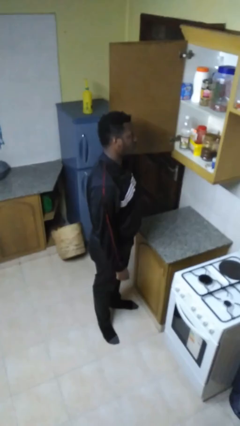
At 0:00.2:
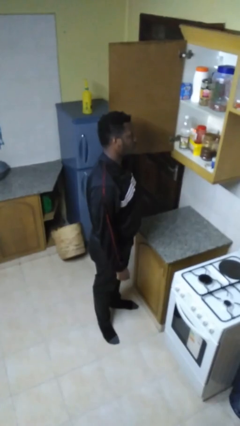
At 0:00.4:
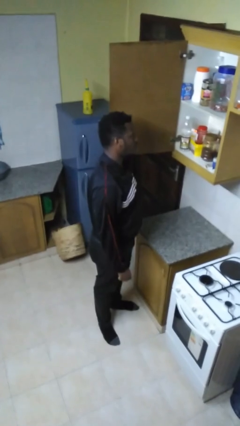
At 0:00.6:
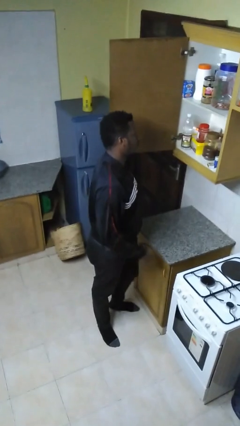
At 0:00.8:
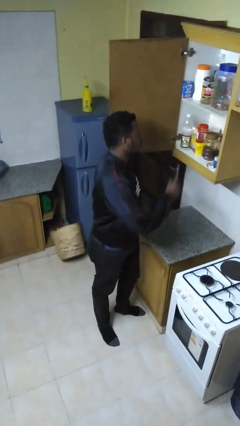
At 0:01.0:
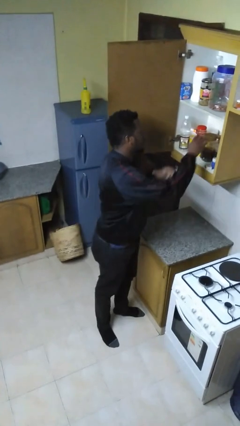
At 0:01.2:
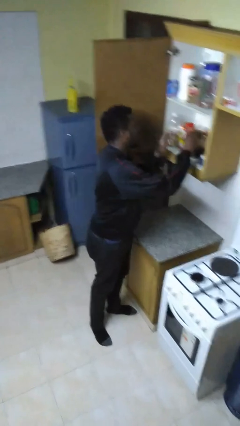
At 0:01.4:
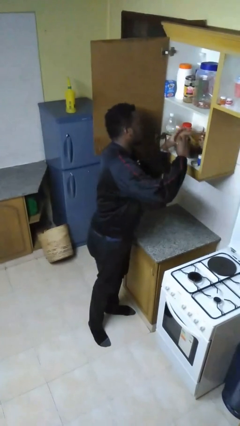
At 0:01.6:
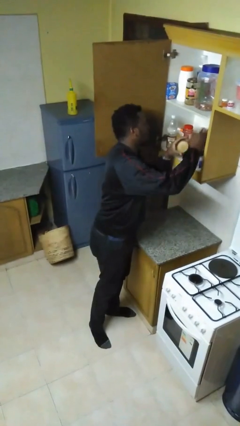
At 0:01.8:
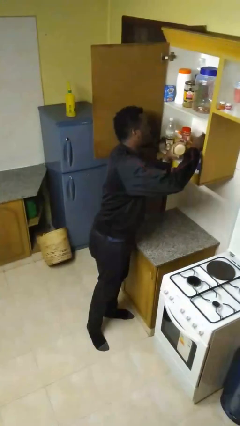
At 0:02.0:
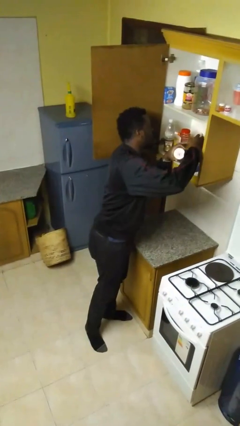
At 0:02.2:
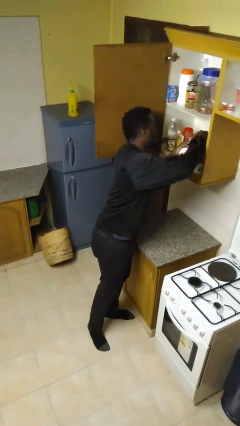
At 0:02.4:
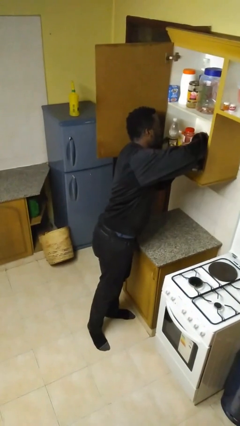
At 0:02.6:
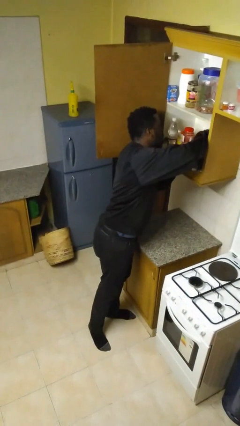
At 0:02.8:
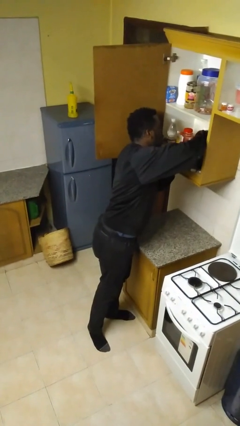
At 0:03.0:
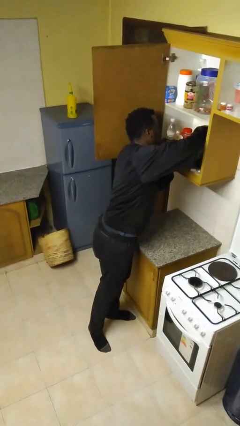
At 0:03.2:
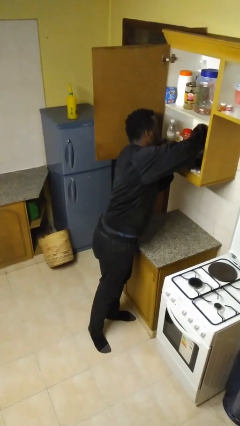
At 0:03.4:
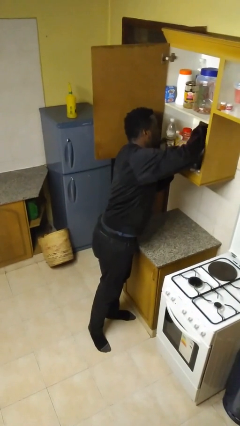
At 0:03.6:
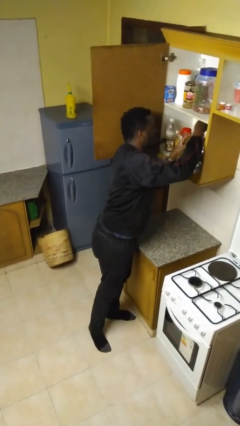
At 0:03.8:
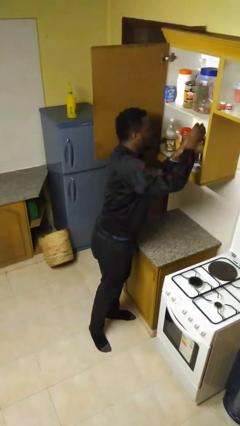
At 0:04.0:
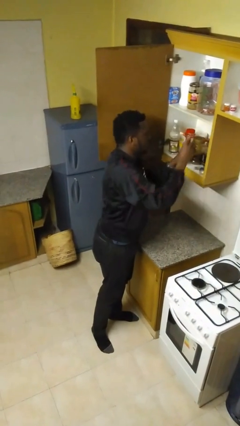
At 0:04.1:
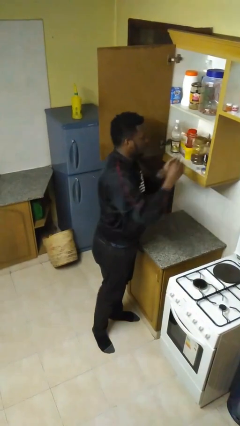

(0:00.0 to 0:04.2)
person searches in cabinet

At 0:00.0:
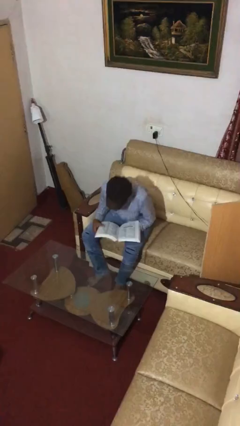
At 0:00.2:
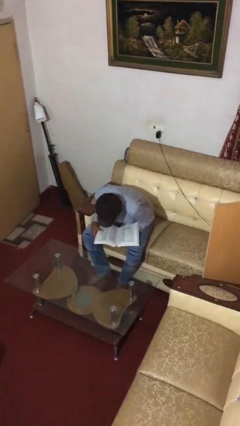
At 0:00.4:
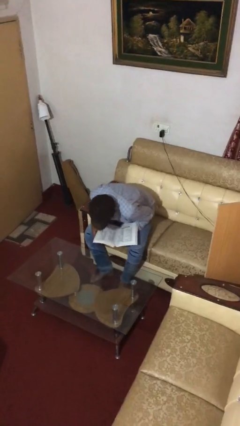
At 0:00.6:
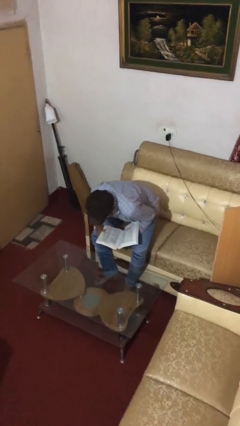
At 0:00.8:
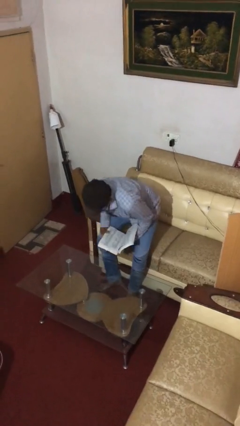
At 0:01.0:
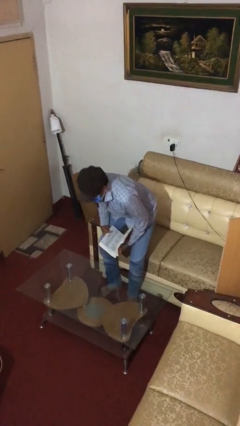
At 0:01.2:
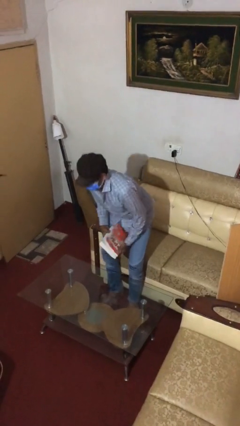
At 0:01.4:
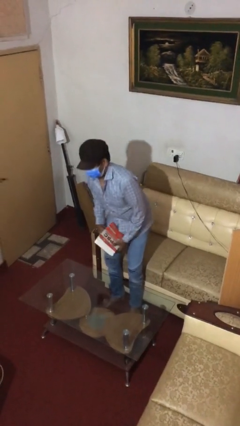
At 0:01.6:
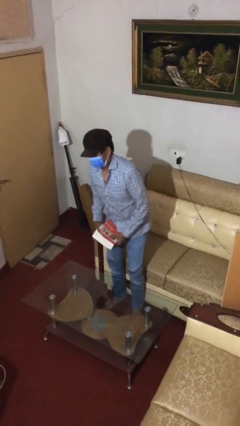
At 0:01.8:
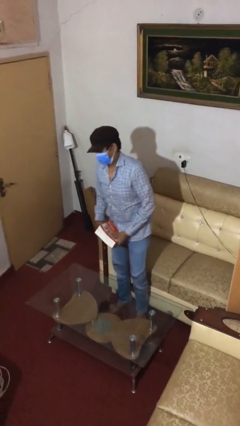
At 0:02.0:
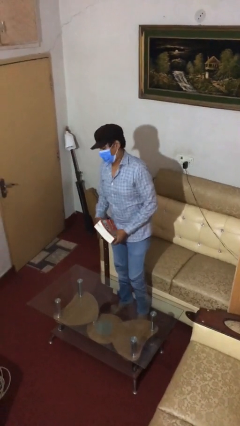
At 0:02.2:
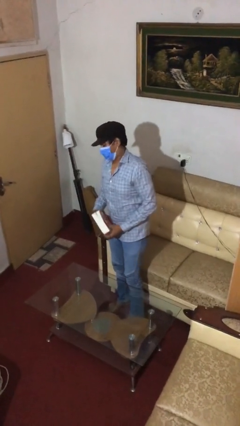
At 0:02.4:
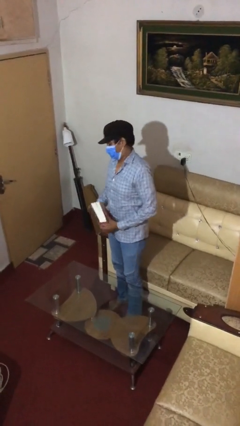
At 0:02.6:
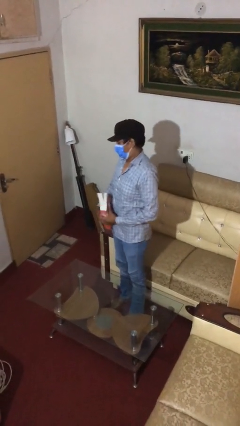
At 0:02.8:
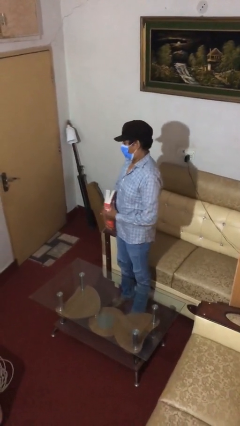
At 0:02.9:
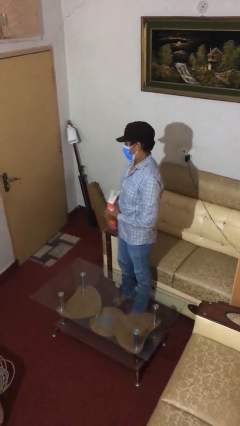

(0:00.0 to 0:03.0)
person stands up

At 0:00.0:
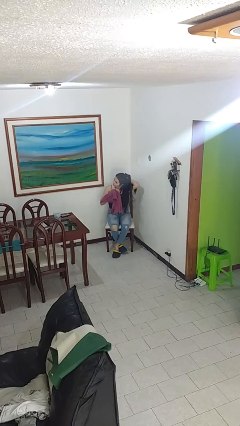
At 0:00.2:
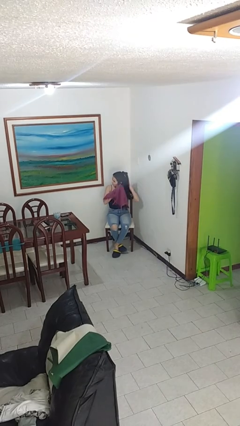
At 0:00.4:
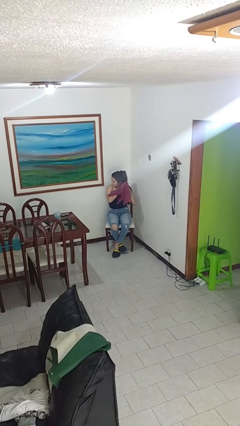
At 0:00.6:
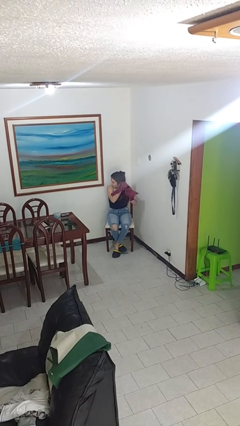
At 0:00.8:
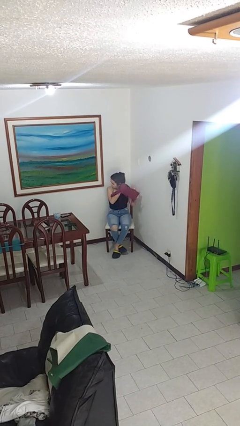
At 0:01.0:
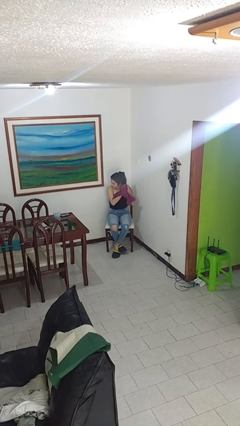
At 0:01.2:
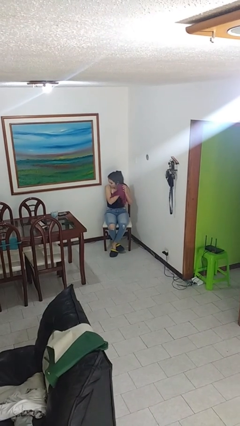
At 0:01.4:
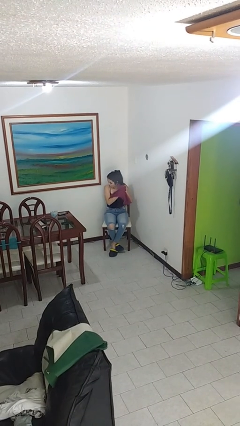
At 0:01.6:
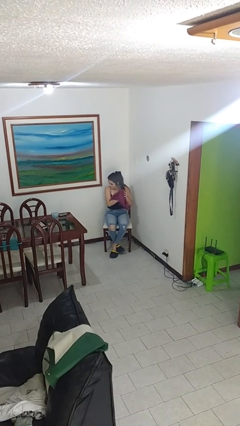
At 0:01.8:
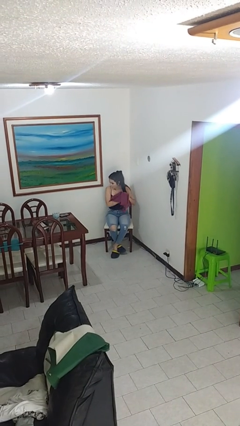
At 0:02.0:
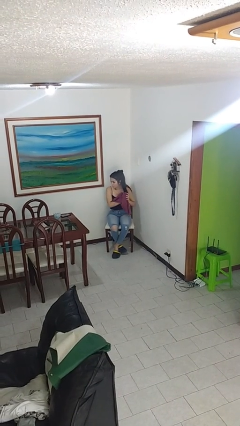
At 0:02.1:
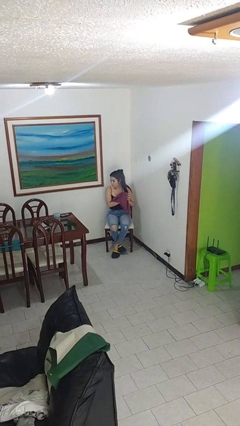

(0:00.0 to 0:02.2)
person dries hair with towel

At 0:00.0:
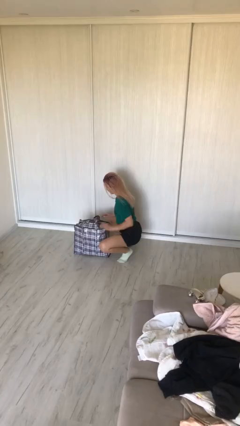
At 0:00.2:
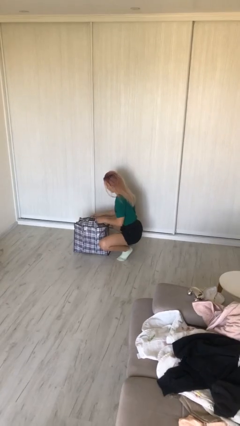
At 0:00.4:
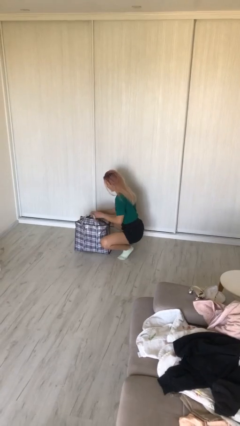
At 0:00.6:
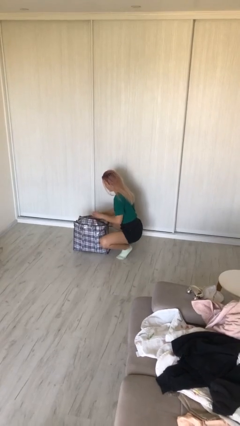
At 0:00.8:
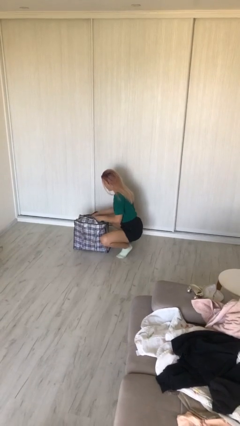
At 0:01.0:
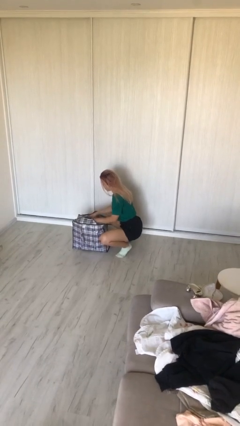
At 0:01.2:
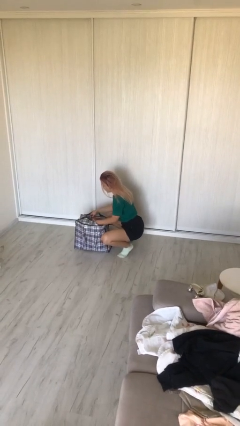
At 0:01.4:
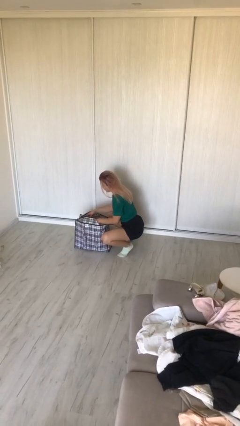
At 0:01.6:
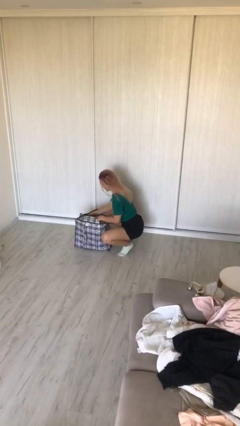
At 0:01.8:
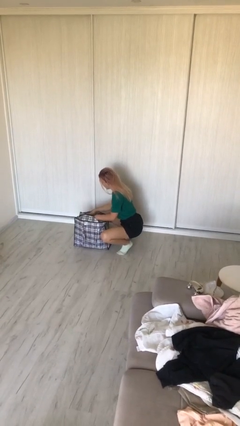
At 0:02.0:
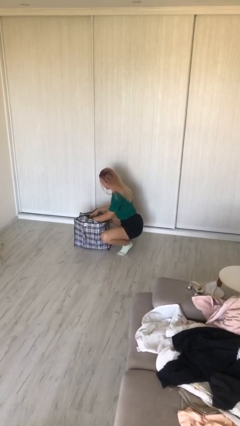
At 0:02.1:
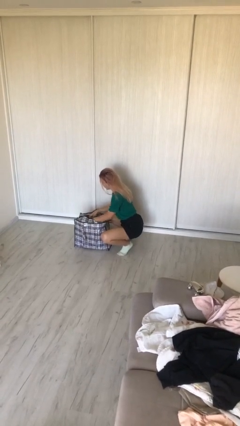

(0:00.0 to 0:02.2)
person searches in bag

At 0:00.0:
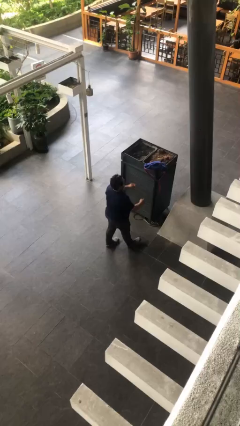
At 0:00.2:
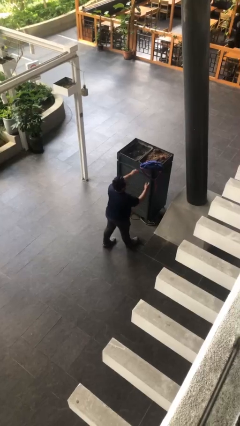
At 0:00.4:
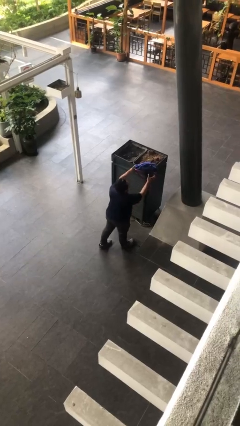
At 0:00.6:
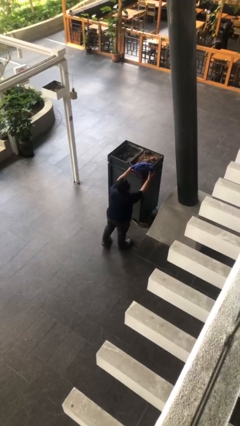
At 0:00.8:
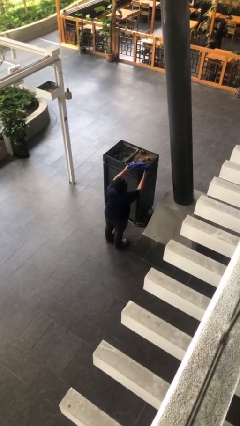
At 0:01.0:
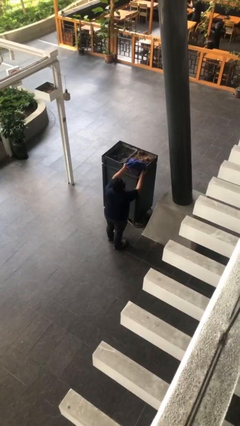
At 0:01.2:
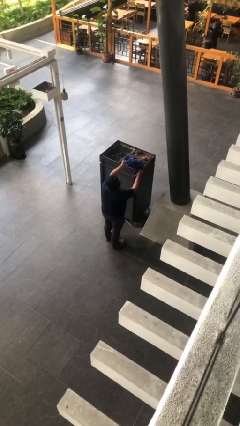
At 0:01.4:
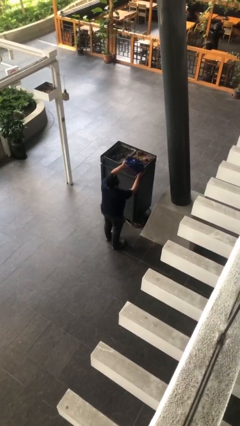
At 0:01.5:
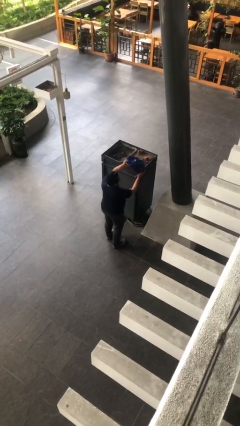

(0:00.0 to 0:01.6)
person picks up object from shelf

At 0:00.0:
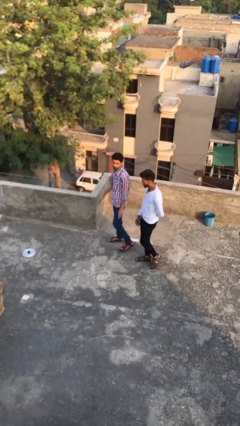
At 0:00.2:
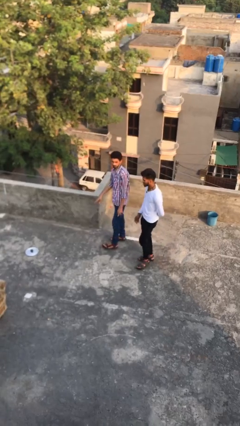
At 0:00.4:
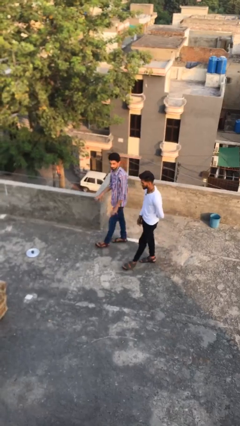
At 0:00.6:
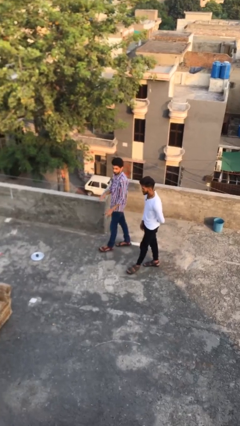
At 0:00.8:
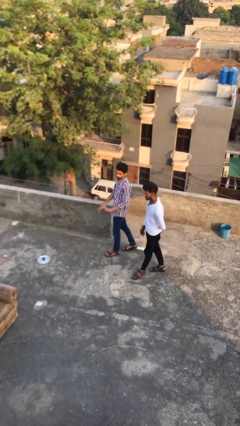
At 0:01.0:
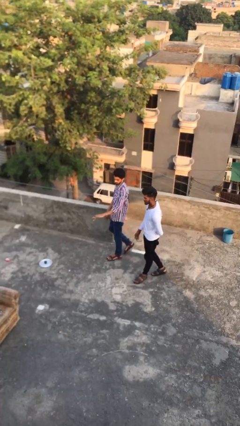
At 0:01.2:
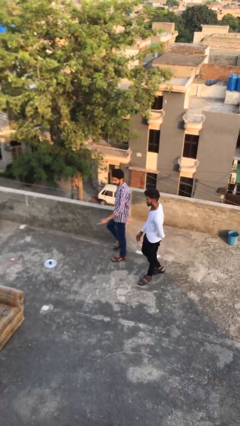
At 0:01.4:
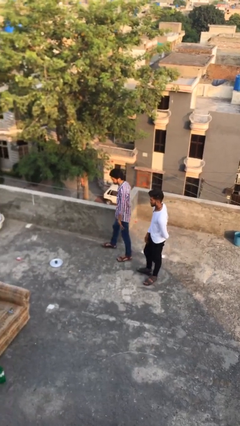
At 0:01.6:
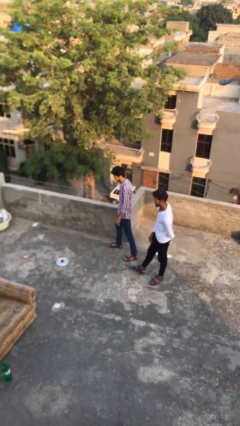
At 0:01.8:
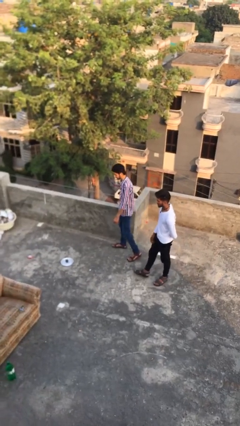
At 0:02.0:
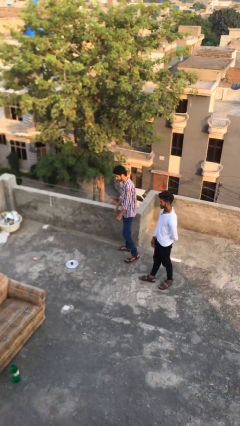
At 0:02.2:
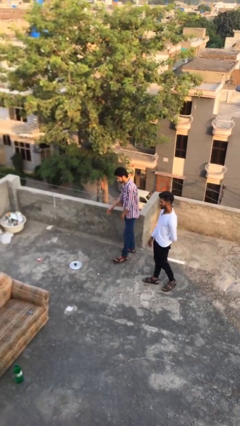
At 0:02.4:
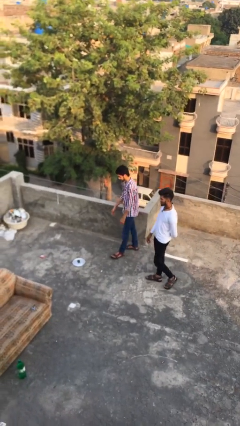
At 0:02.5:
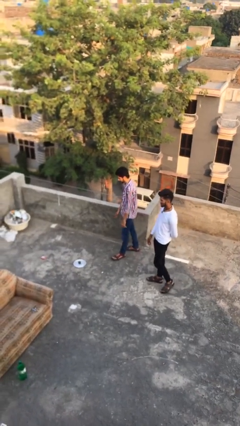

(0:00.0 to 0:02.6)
person talks to person

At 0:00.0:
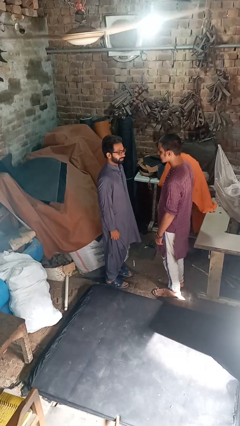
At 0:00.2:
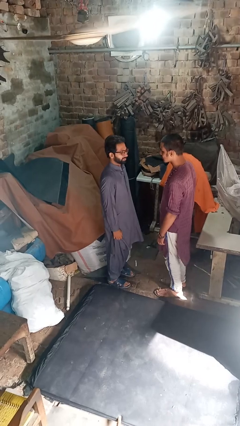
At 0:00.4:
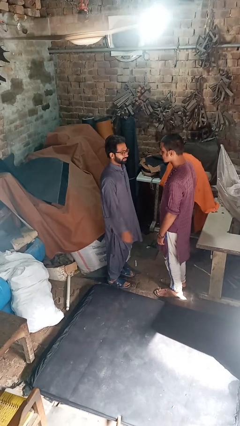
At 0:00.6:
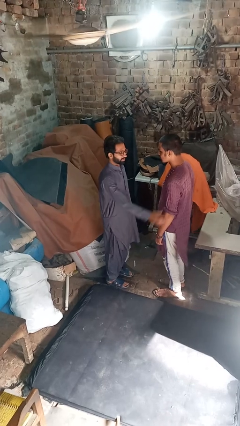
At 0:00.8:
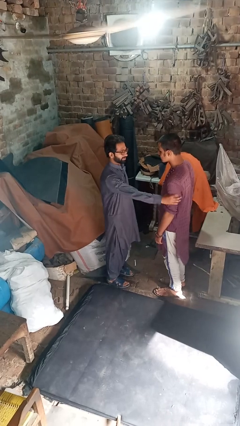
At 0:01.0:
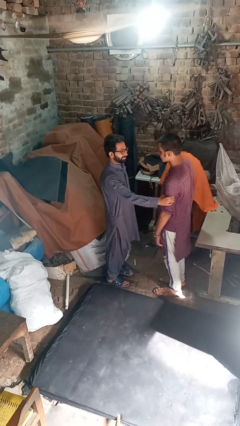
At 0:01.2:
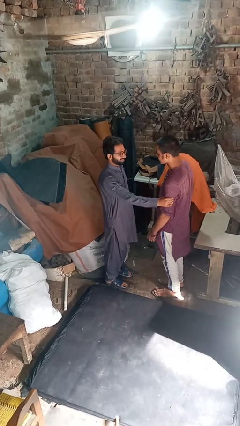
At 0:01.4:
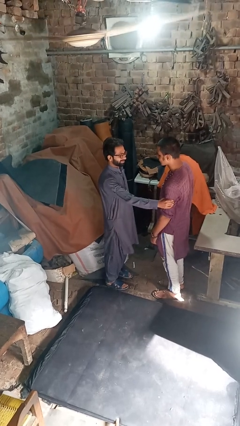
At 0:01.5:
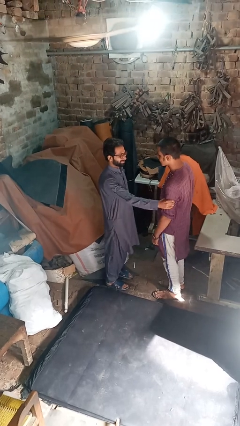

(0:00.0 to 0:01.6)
person grabs person by forearm
